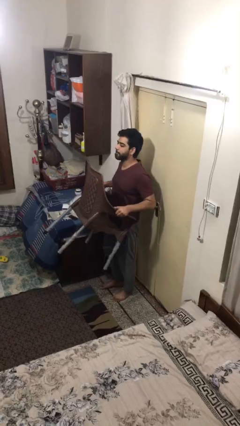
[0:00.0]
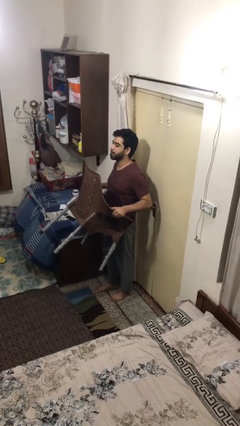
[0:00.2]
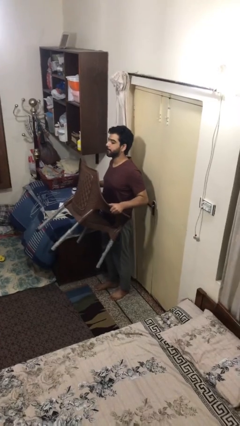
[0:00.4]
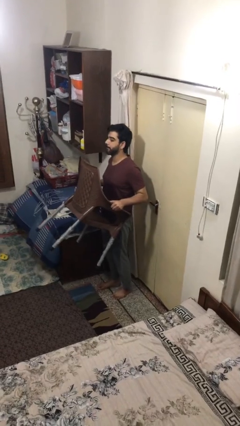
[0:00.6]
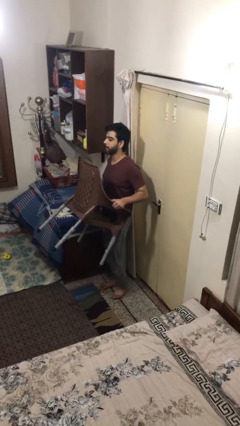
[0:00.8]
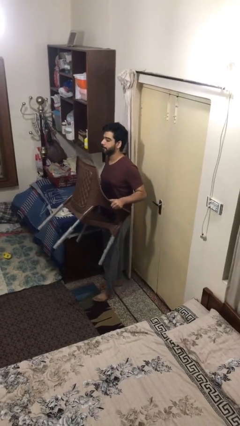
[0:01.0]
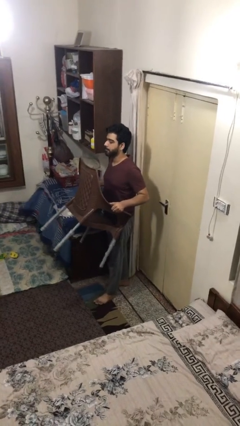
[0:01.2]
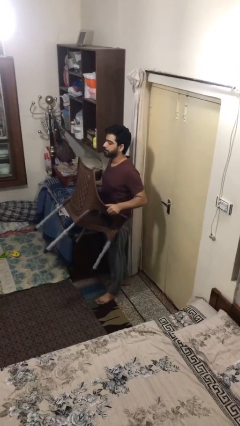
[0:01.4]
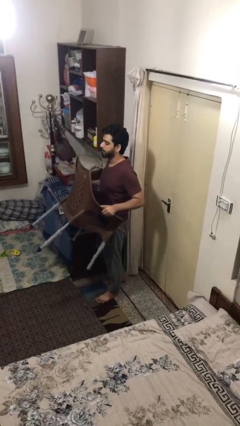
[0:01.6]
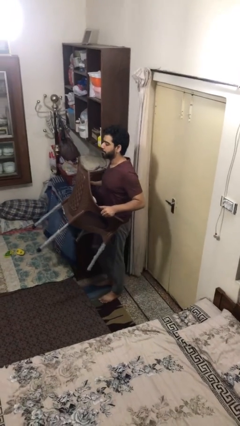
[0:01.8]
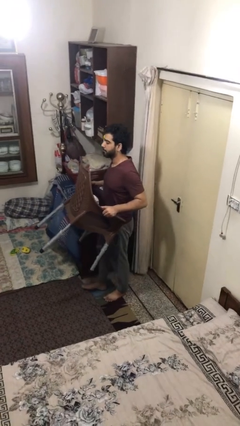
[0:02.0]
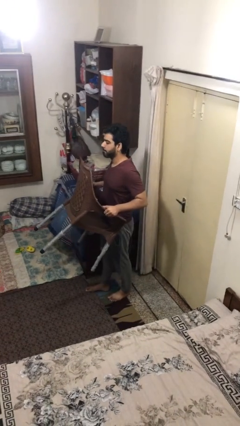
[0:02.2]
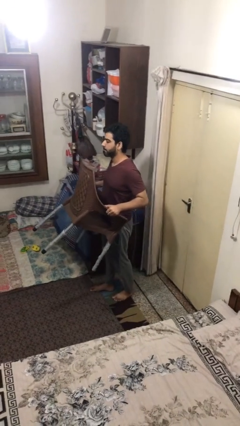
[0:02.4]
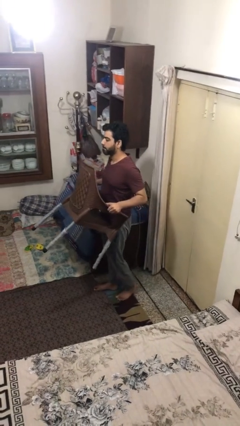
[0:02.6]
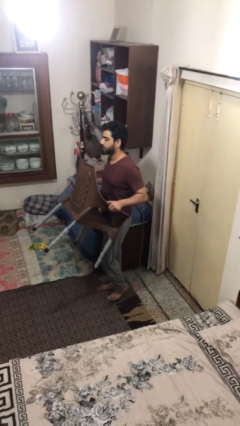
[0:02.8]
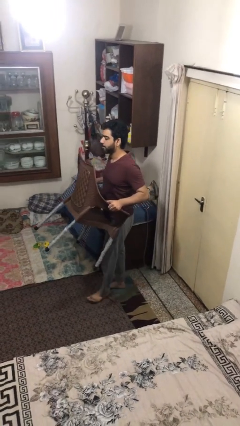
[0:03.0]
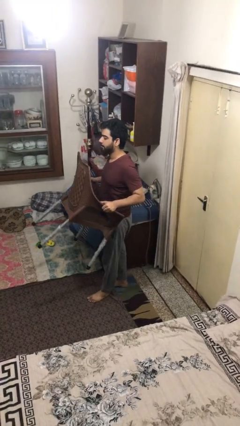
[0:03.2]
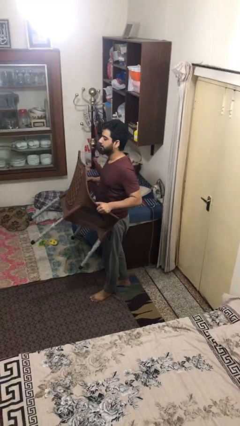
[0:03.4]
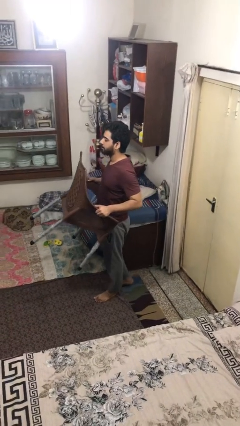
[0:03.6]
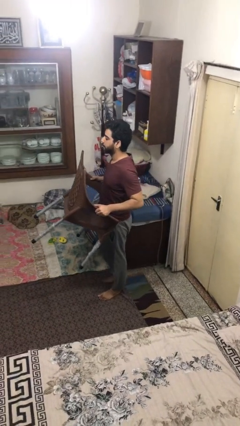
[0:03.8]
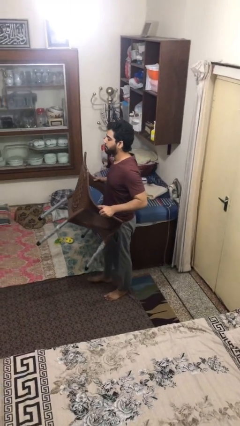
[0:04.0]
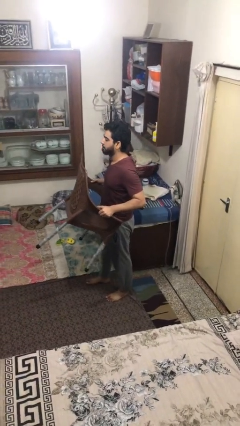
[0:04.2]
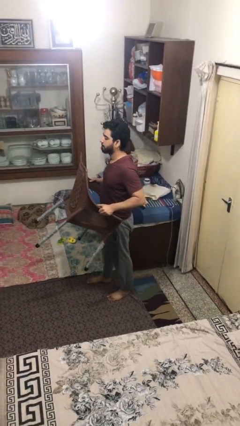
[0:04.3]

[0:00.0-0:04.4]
person carries heavy object

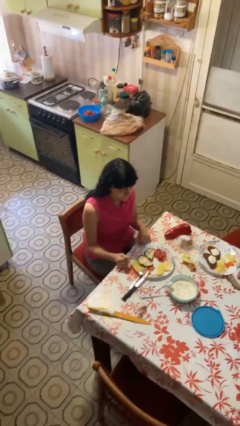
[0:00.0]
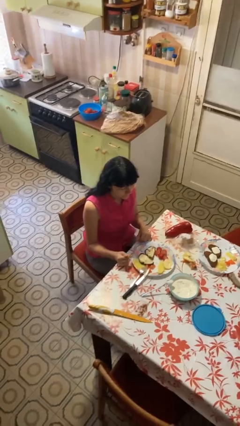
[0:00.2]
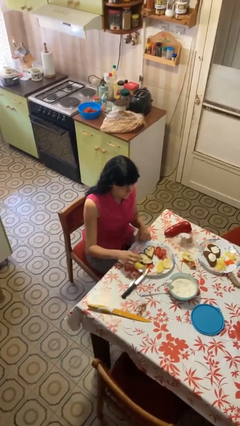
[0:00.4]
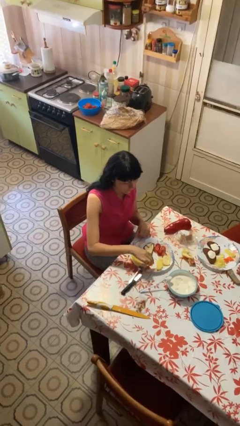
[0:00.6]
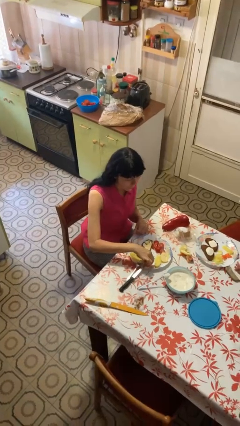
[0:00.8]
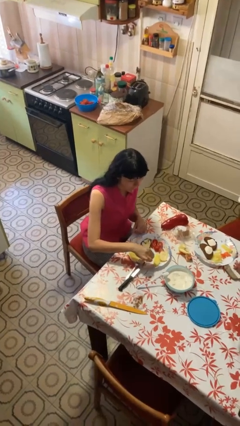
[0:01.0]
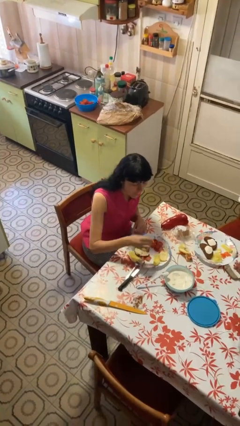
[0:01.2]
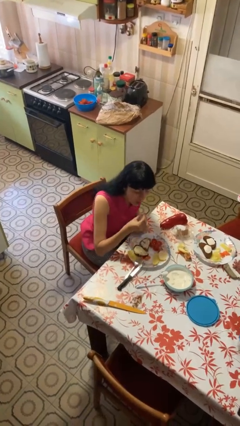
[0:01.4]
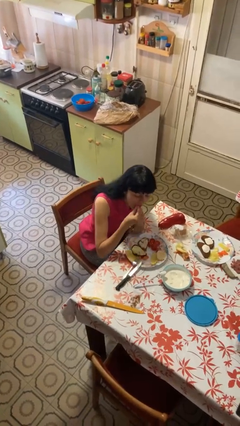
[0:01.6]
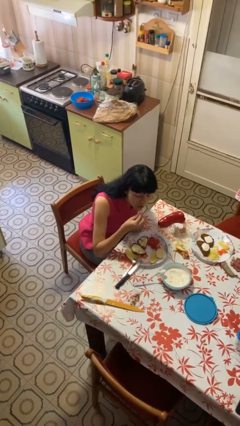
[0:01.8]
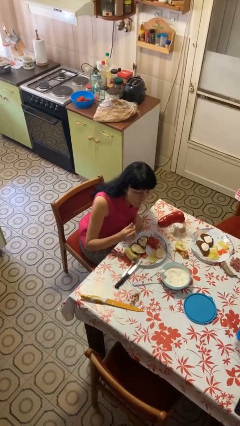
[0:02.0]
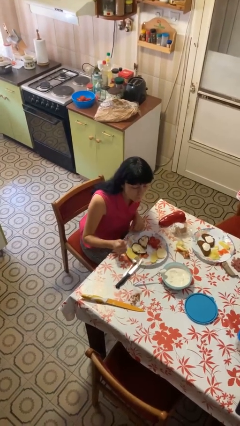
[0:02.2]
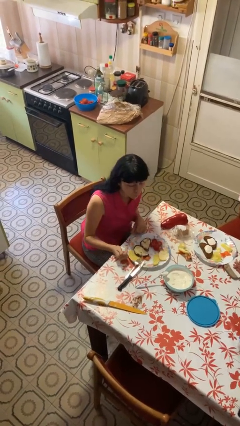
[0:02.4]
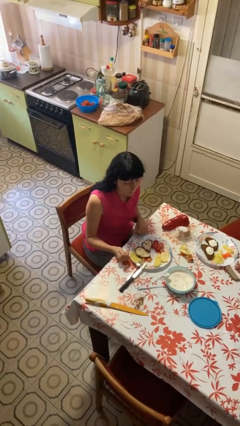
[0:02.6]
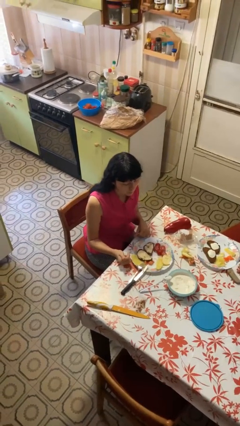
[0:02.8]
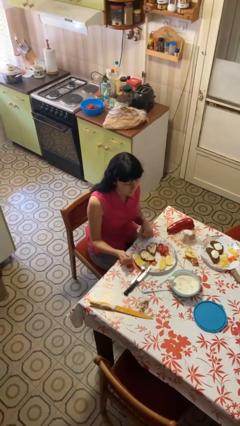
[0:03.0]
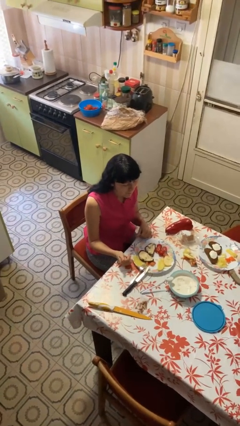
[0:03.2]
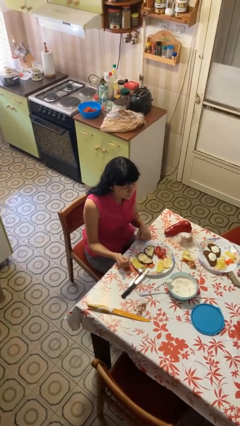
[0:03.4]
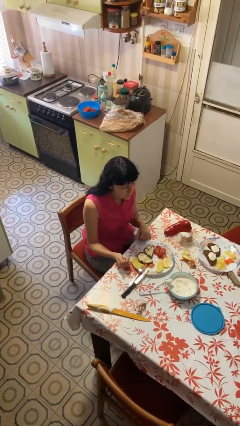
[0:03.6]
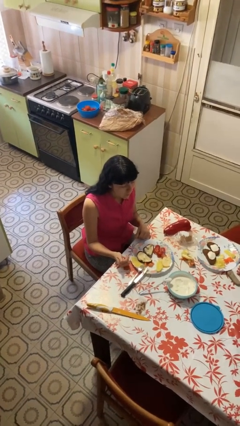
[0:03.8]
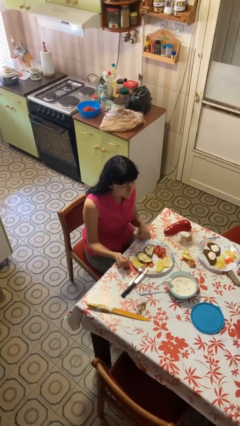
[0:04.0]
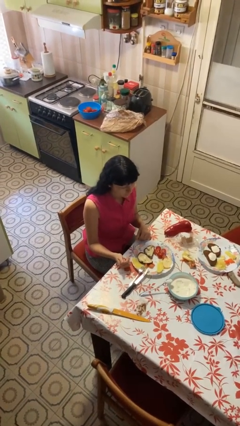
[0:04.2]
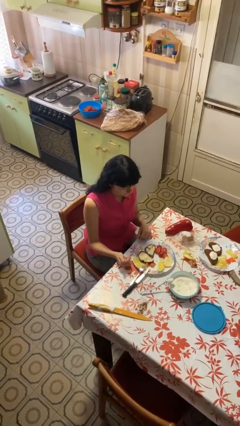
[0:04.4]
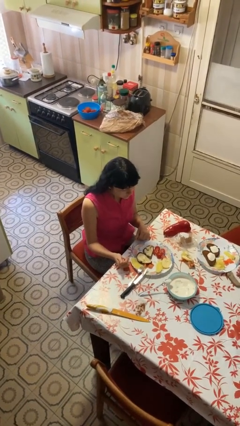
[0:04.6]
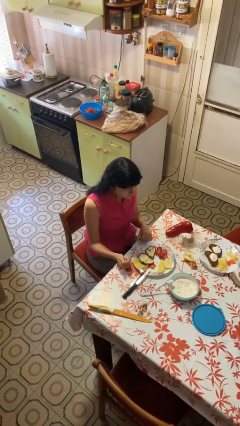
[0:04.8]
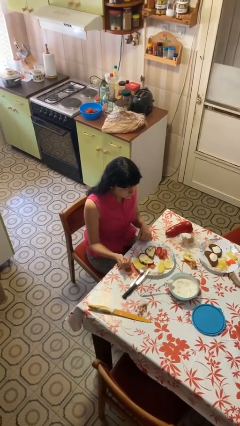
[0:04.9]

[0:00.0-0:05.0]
person eats with hands

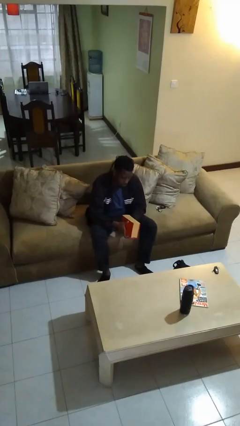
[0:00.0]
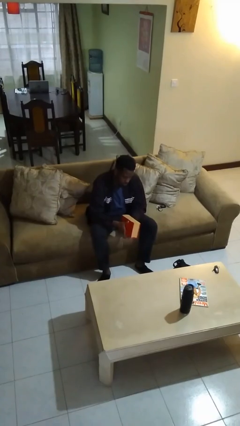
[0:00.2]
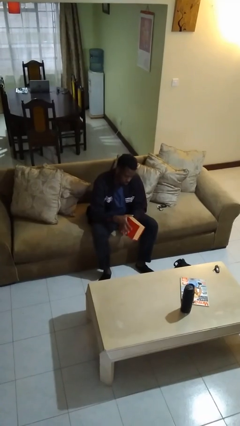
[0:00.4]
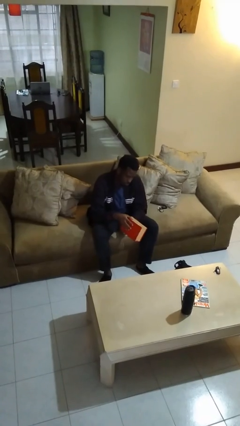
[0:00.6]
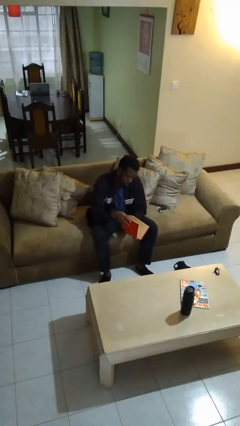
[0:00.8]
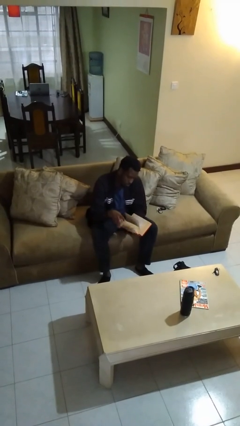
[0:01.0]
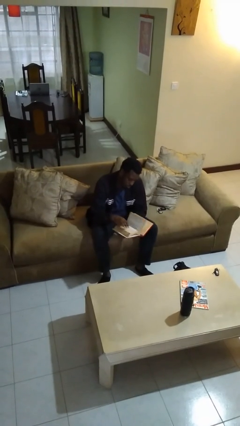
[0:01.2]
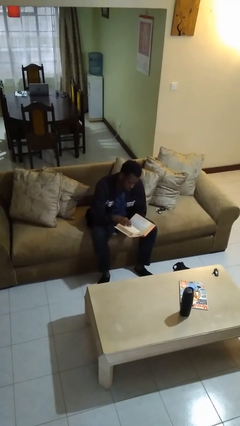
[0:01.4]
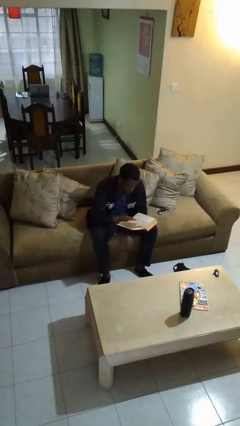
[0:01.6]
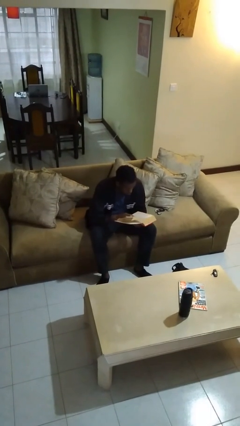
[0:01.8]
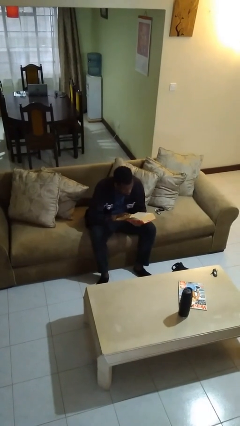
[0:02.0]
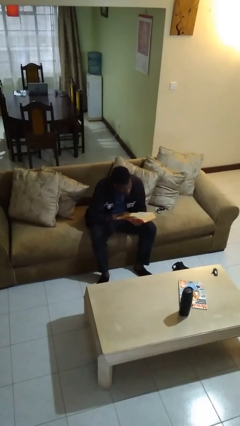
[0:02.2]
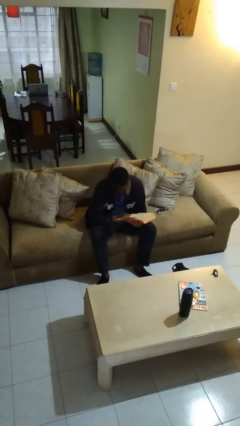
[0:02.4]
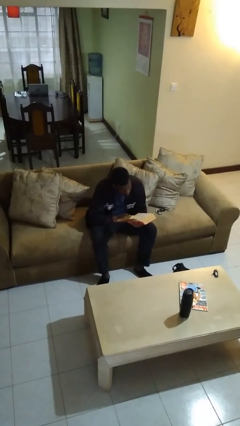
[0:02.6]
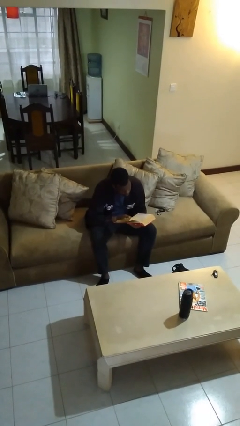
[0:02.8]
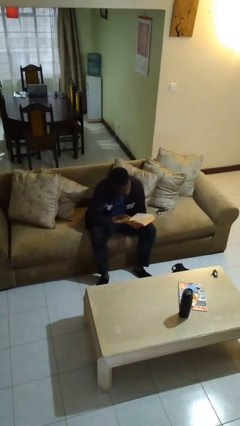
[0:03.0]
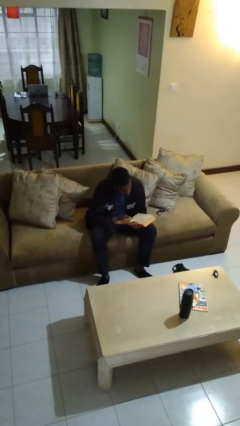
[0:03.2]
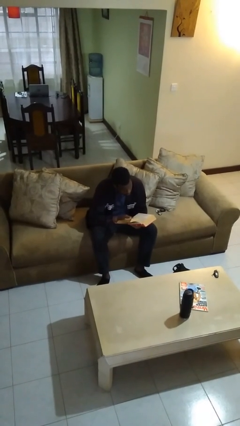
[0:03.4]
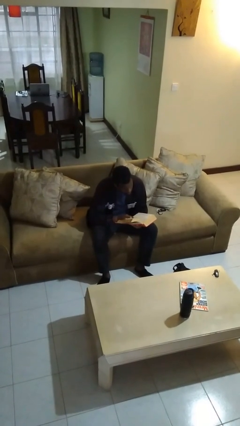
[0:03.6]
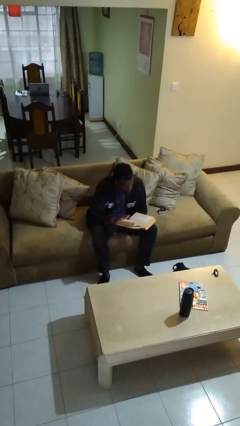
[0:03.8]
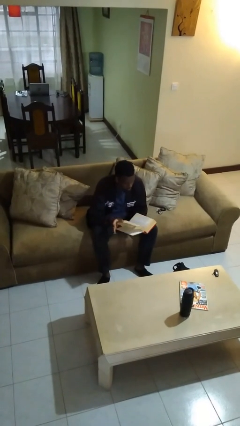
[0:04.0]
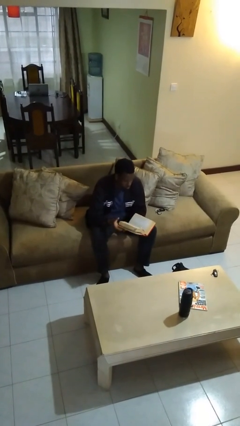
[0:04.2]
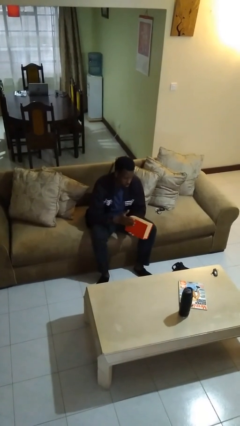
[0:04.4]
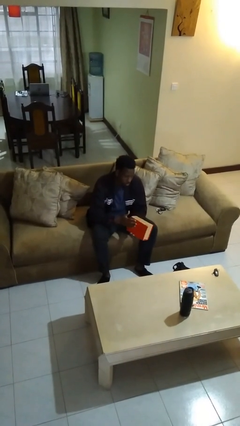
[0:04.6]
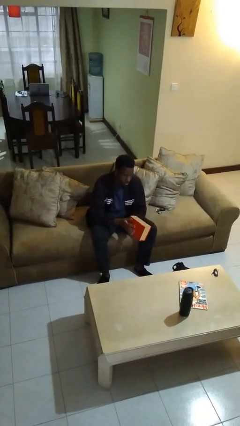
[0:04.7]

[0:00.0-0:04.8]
person reads book

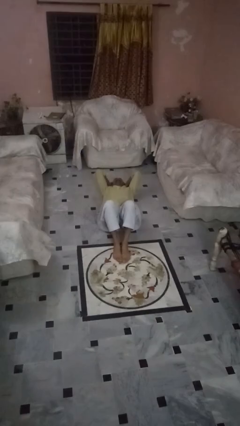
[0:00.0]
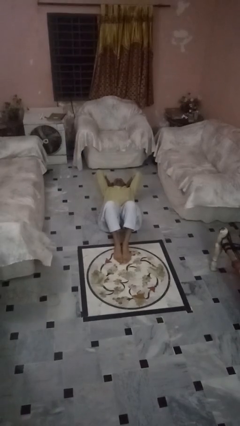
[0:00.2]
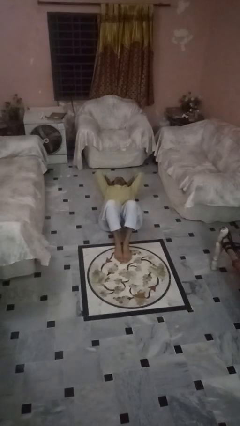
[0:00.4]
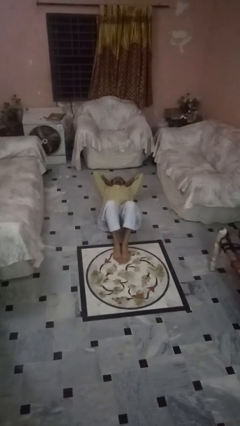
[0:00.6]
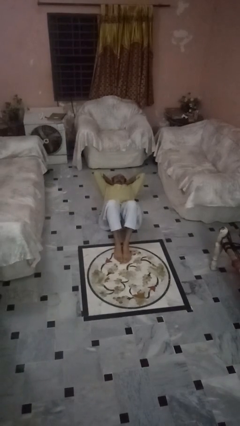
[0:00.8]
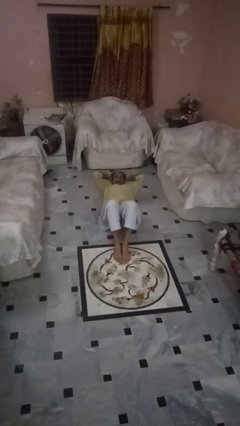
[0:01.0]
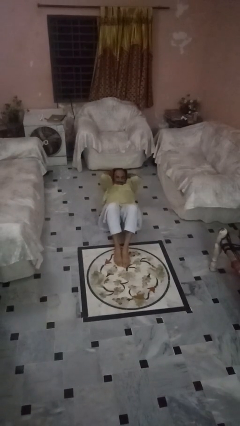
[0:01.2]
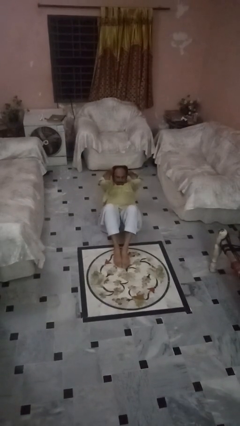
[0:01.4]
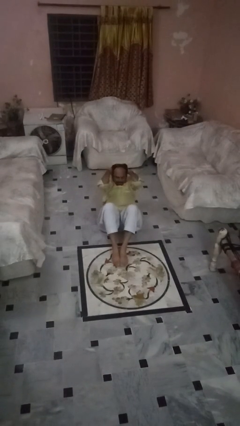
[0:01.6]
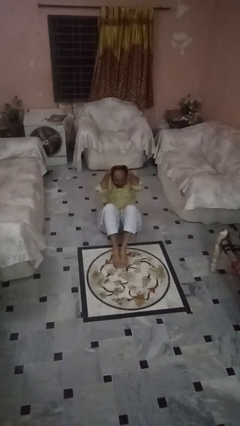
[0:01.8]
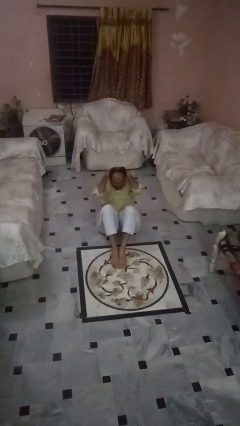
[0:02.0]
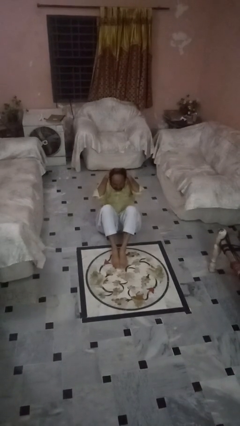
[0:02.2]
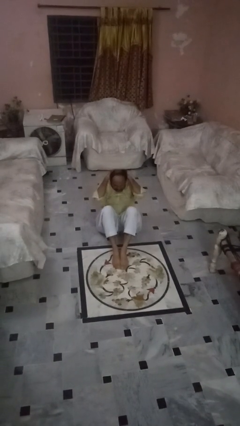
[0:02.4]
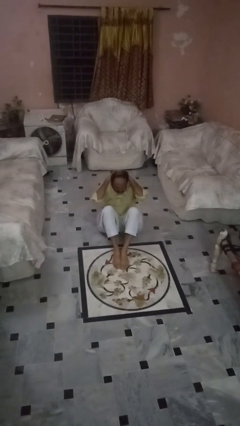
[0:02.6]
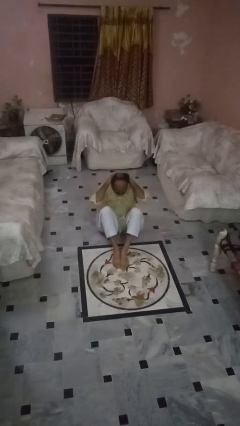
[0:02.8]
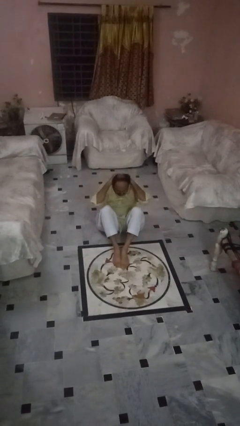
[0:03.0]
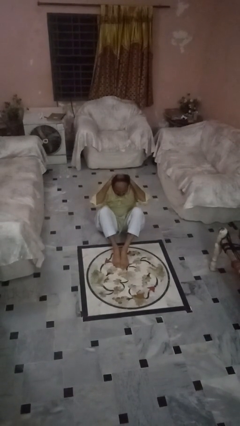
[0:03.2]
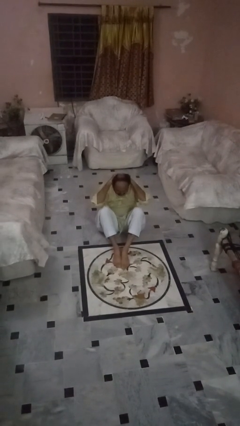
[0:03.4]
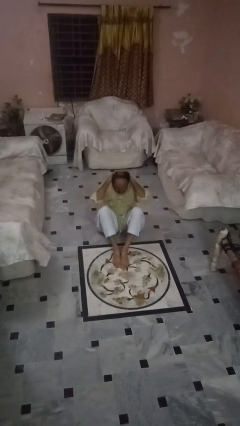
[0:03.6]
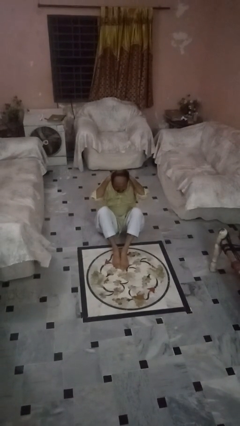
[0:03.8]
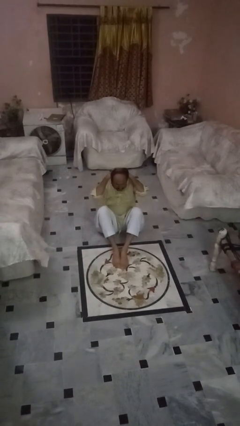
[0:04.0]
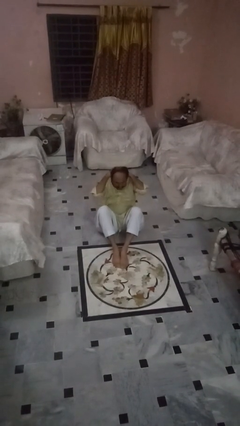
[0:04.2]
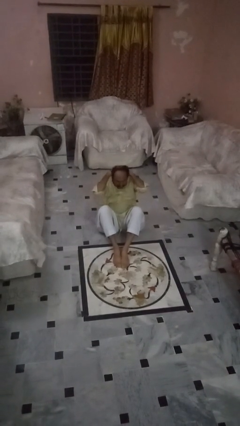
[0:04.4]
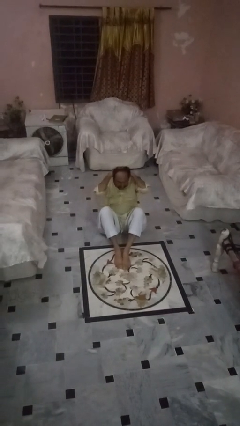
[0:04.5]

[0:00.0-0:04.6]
person exercises with situp
